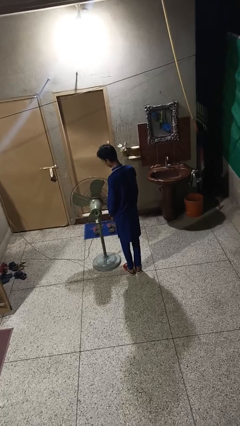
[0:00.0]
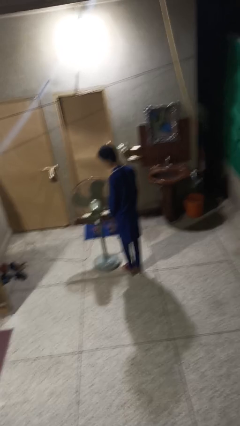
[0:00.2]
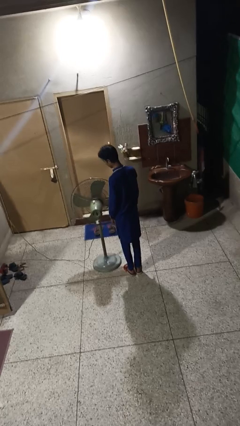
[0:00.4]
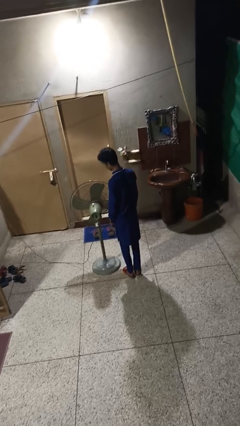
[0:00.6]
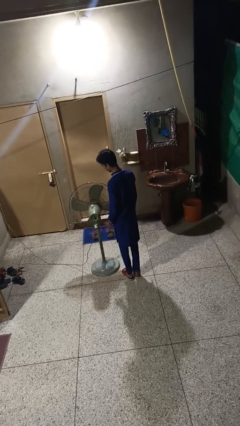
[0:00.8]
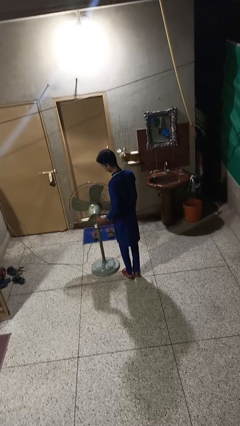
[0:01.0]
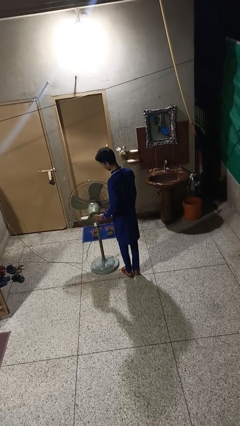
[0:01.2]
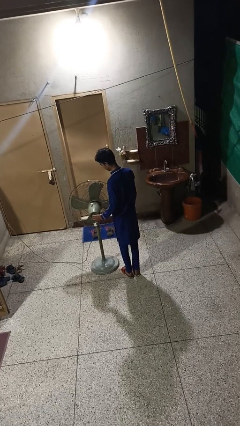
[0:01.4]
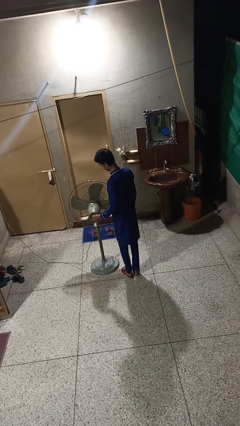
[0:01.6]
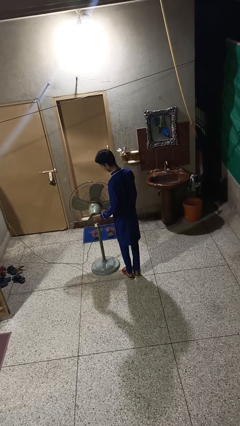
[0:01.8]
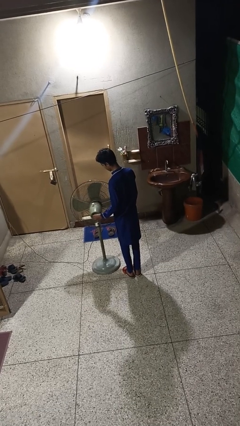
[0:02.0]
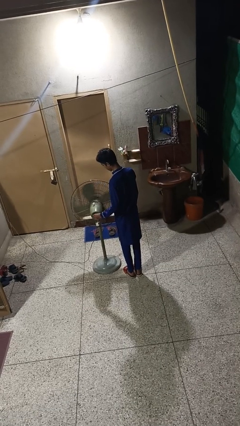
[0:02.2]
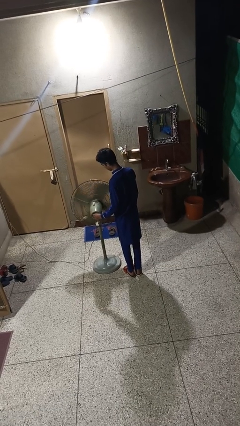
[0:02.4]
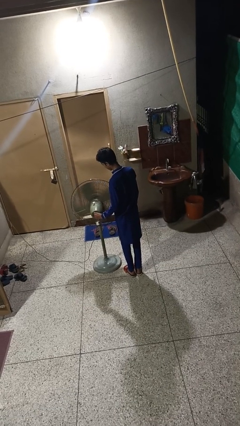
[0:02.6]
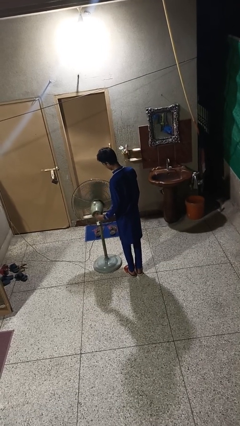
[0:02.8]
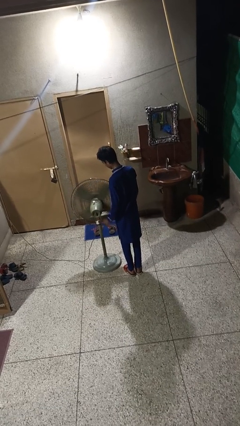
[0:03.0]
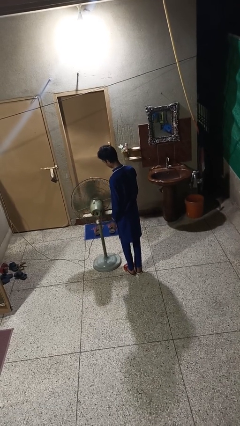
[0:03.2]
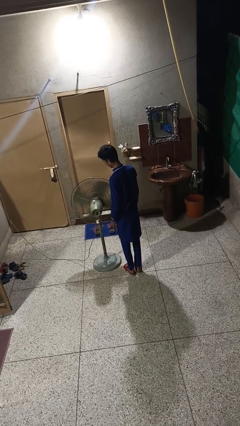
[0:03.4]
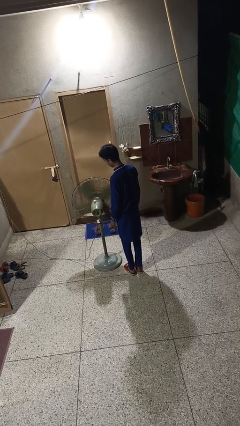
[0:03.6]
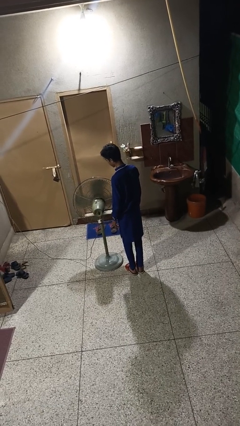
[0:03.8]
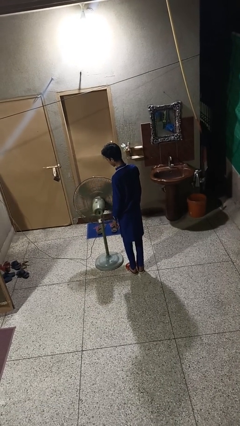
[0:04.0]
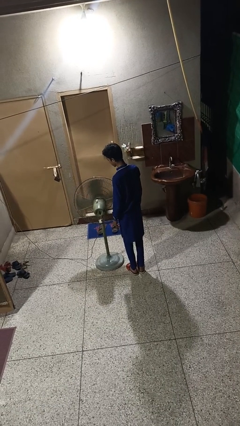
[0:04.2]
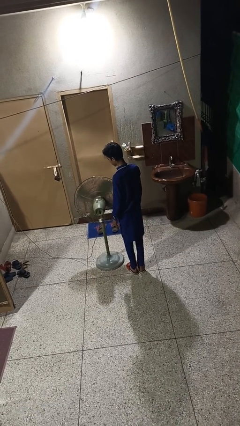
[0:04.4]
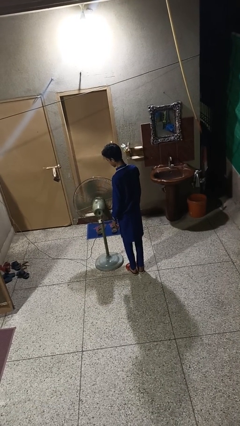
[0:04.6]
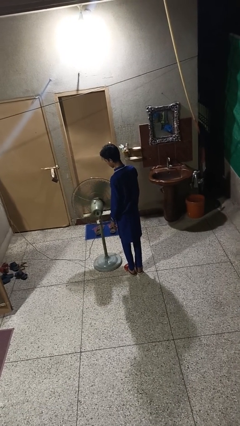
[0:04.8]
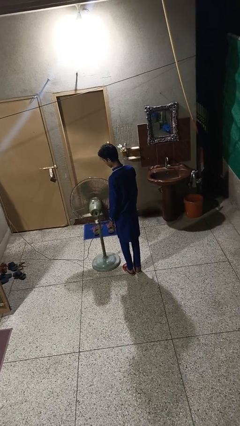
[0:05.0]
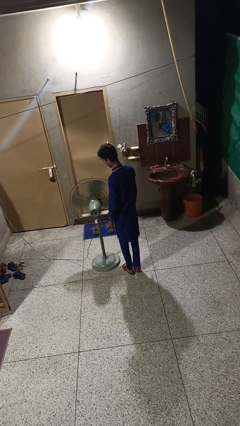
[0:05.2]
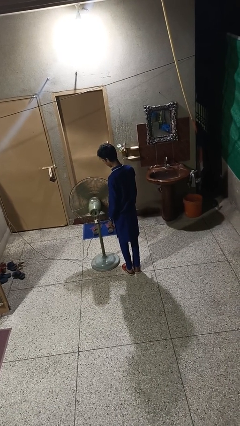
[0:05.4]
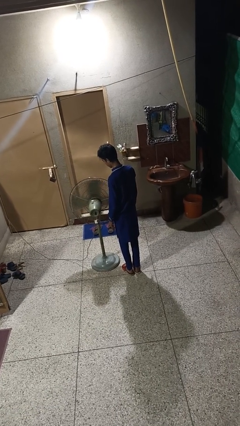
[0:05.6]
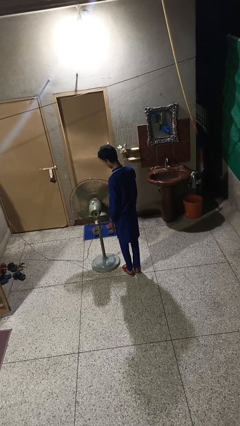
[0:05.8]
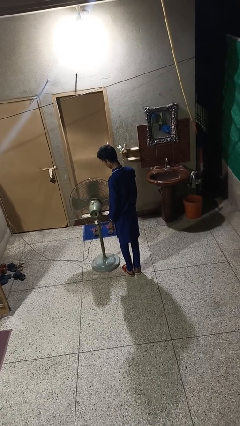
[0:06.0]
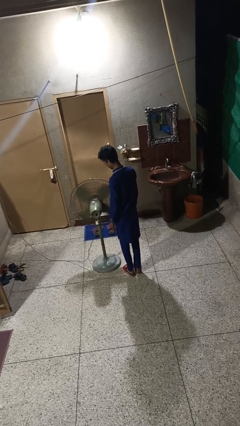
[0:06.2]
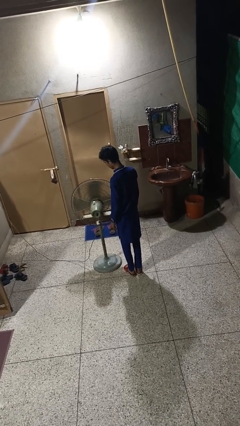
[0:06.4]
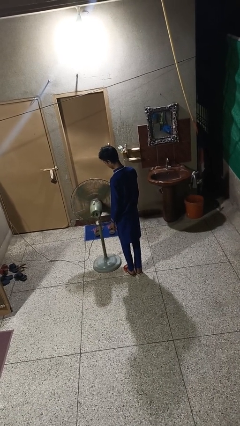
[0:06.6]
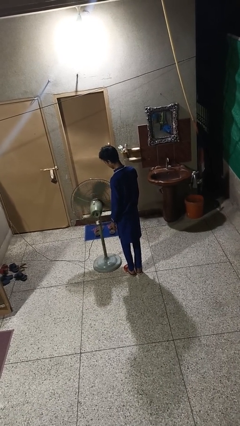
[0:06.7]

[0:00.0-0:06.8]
person turns on fan

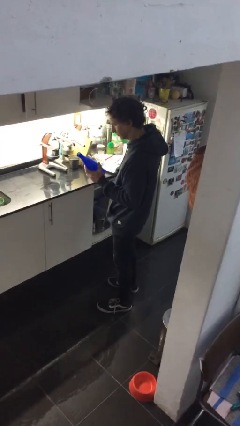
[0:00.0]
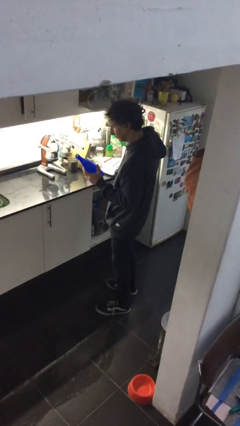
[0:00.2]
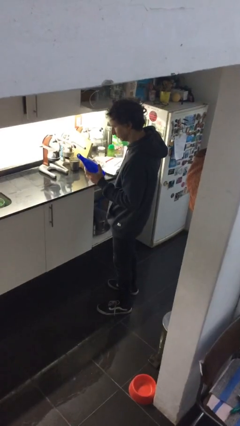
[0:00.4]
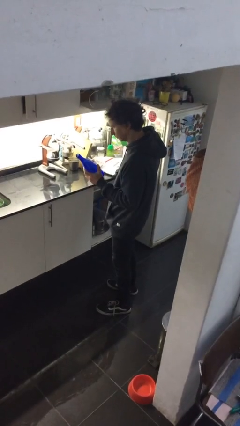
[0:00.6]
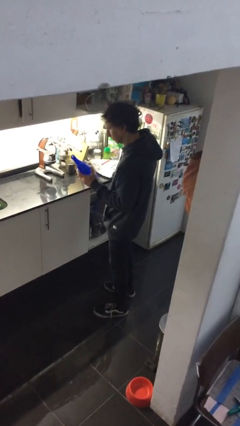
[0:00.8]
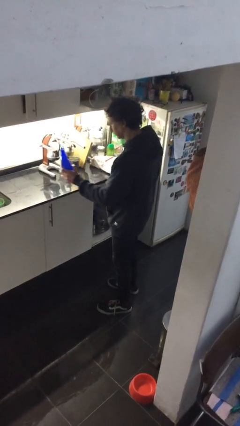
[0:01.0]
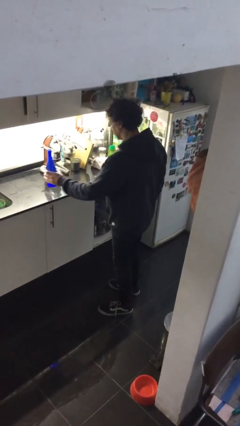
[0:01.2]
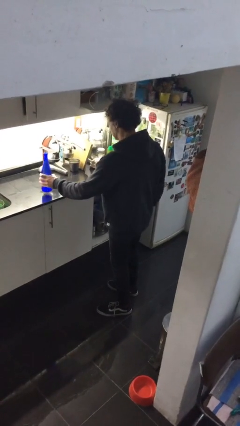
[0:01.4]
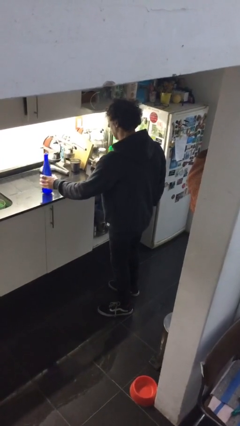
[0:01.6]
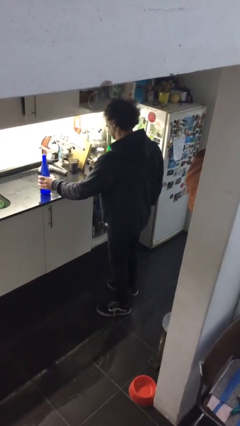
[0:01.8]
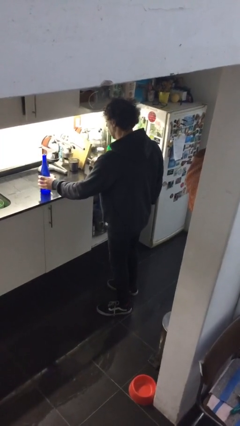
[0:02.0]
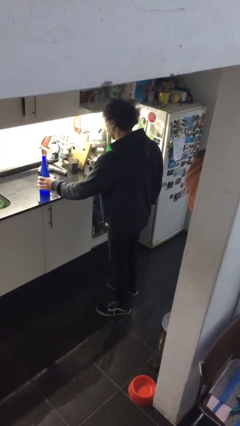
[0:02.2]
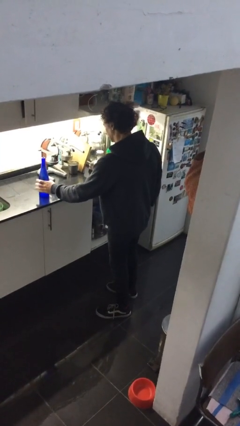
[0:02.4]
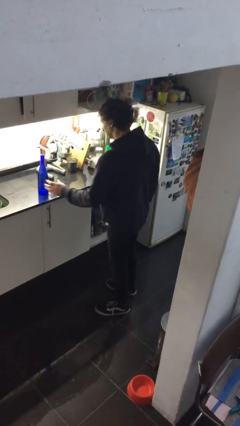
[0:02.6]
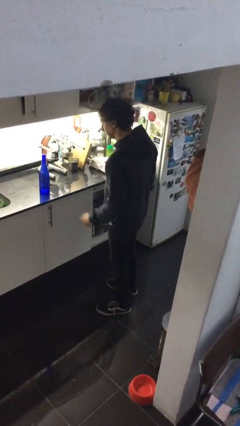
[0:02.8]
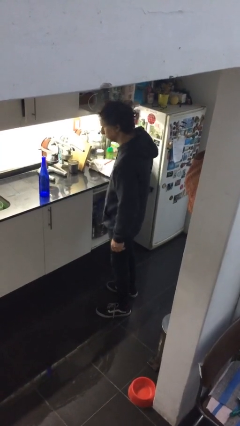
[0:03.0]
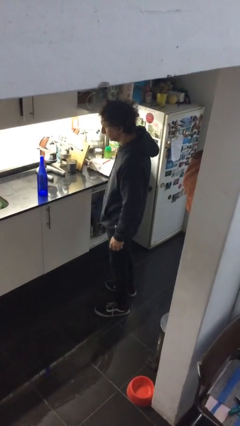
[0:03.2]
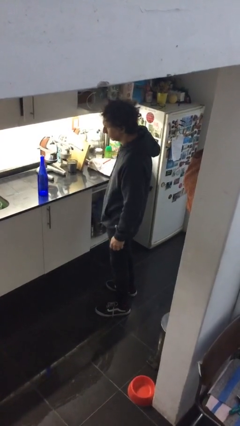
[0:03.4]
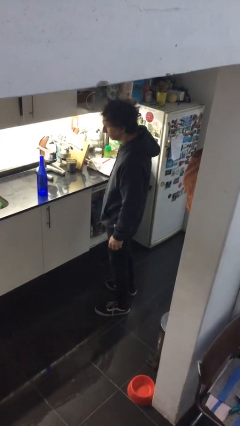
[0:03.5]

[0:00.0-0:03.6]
person puts down object on countertop

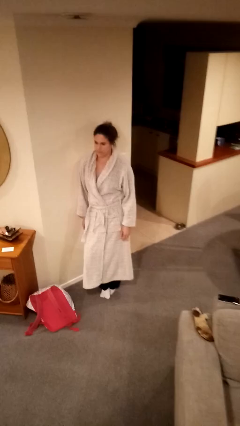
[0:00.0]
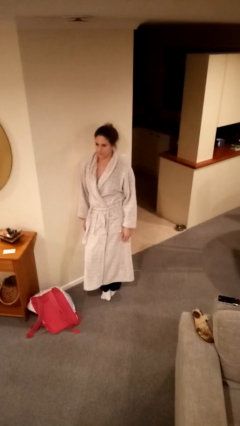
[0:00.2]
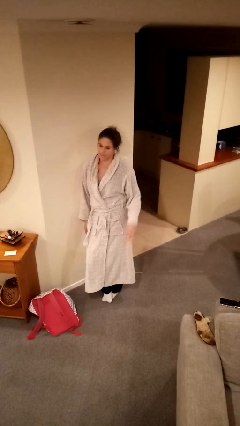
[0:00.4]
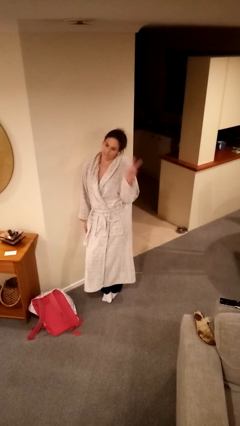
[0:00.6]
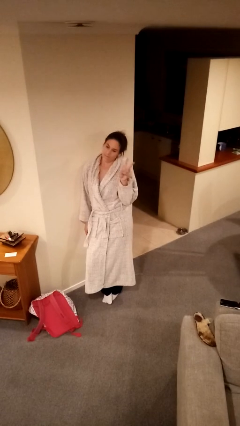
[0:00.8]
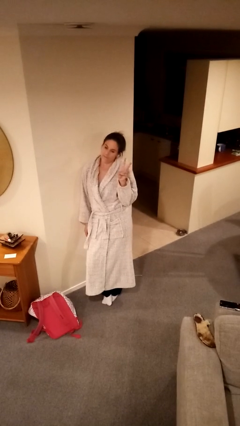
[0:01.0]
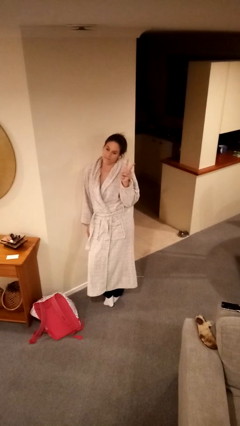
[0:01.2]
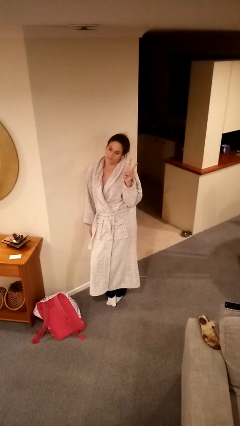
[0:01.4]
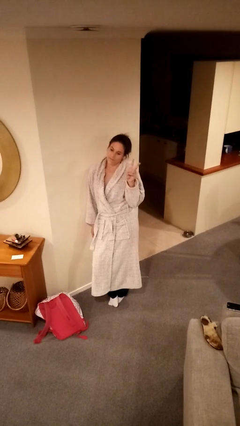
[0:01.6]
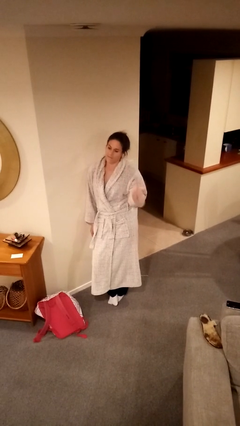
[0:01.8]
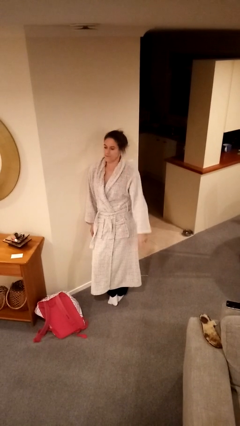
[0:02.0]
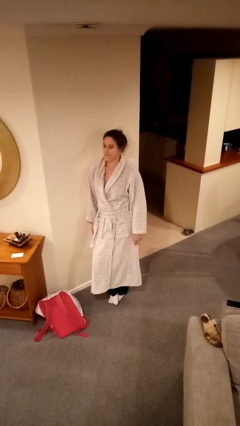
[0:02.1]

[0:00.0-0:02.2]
person gestures peace

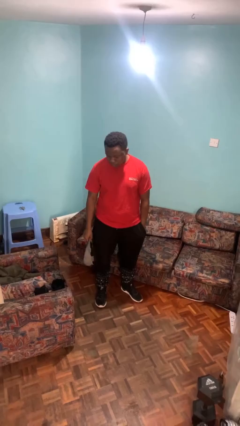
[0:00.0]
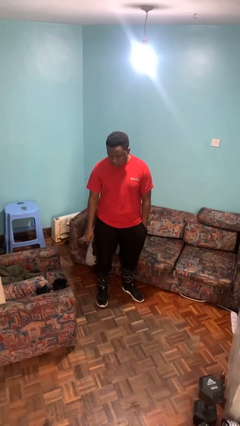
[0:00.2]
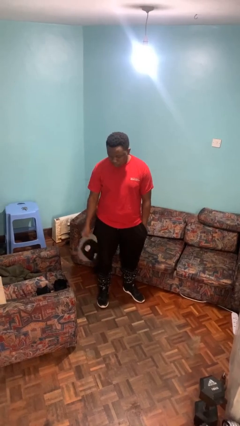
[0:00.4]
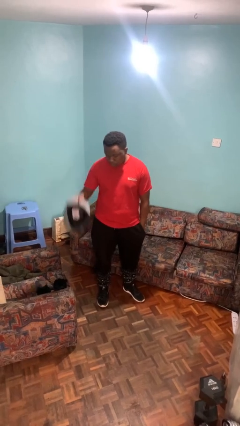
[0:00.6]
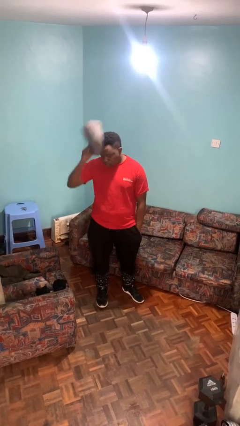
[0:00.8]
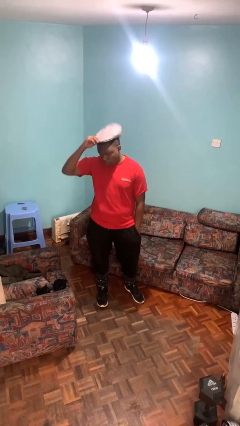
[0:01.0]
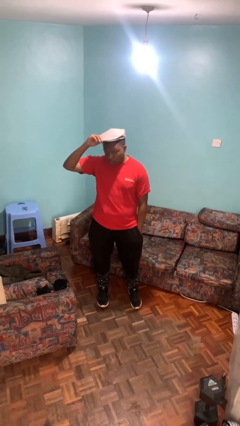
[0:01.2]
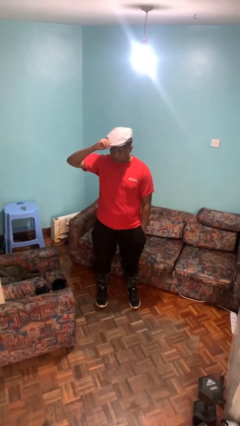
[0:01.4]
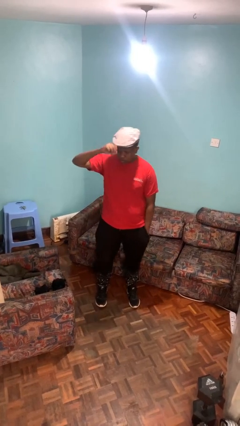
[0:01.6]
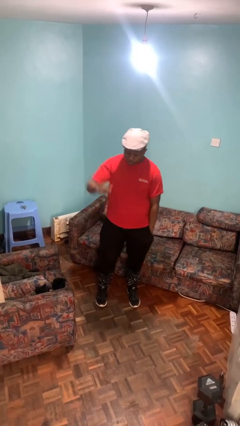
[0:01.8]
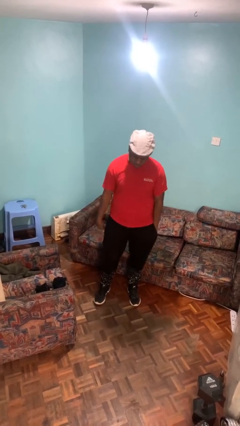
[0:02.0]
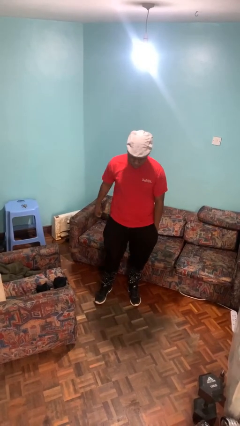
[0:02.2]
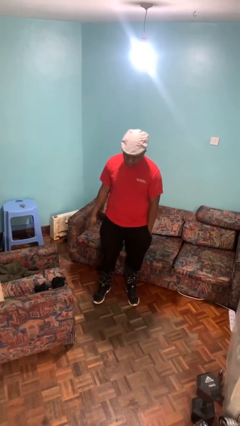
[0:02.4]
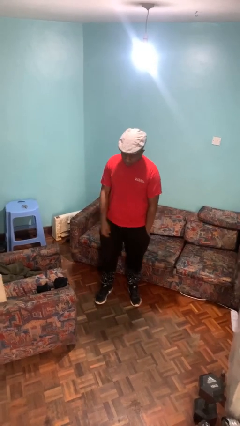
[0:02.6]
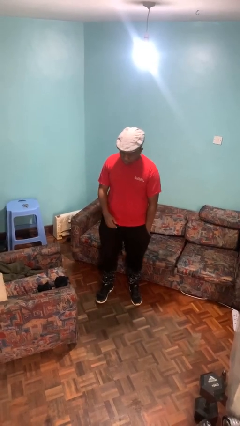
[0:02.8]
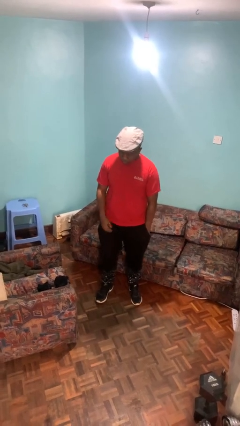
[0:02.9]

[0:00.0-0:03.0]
person puts on hat

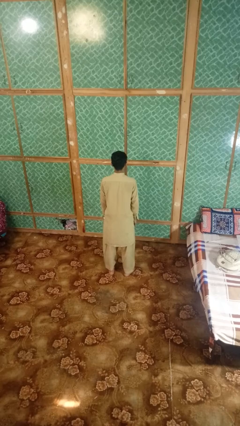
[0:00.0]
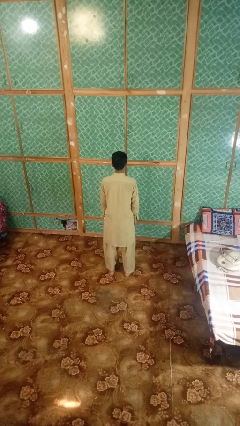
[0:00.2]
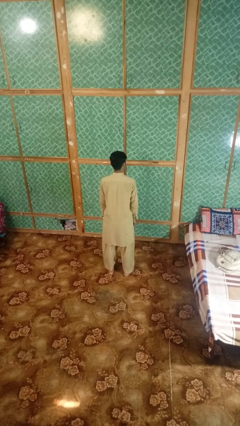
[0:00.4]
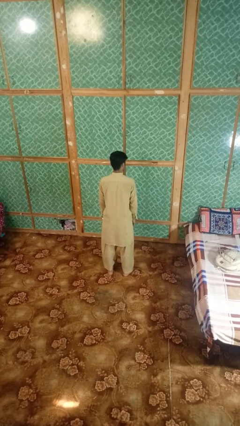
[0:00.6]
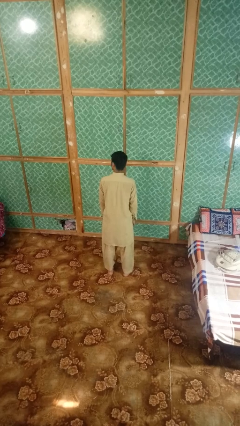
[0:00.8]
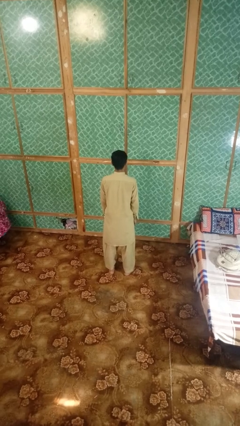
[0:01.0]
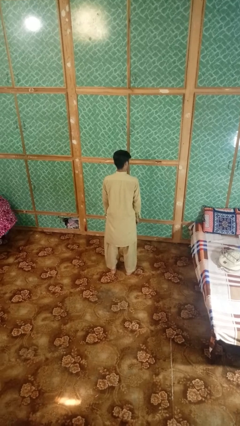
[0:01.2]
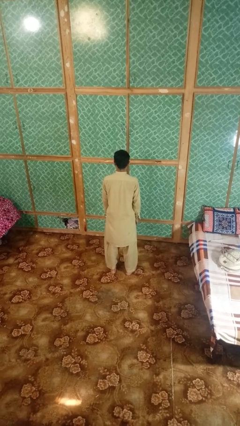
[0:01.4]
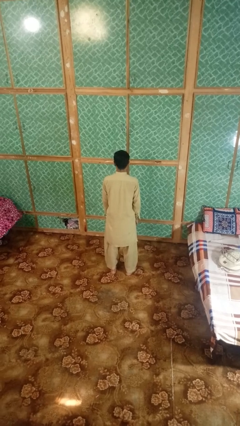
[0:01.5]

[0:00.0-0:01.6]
person nods head

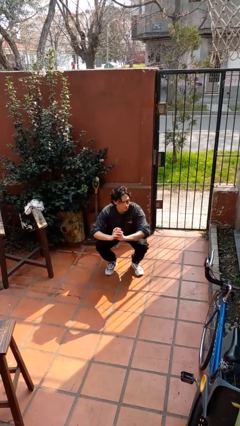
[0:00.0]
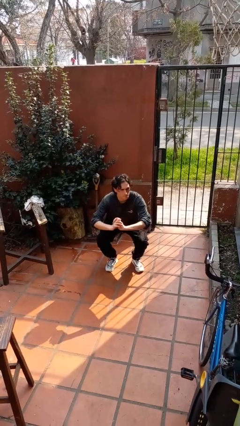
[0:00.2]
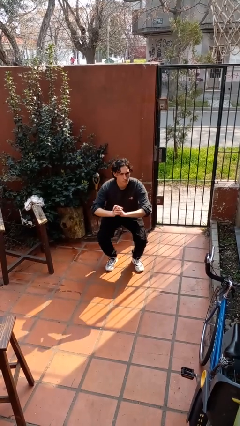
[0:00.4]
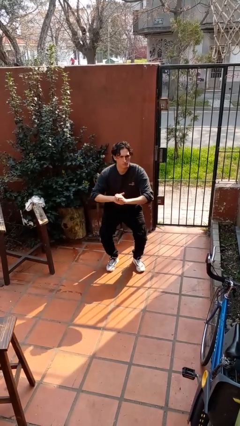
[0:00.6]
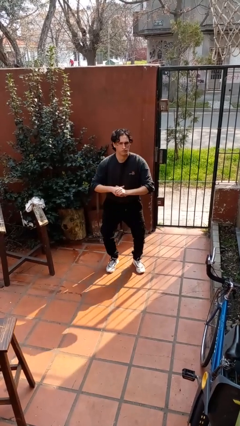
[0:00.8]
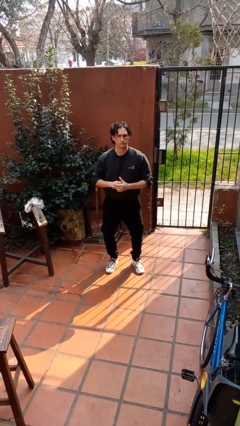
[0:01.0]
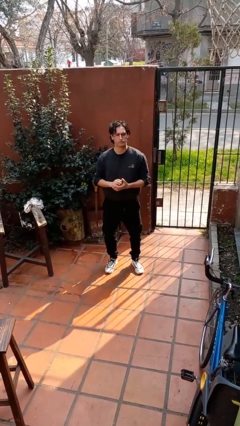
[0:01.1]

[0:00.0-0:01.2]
person stands up
